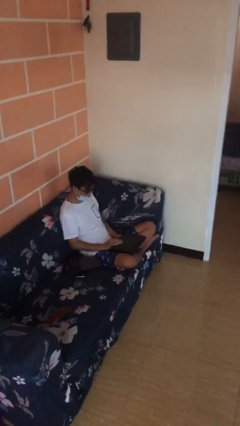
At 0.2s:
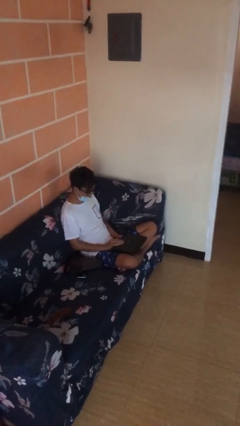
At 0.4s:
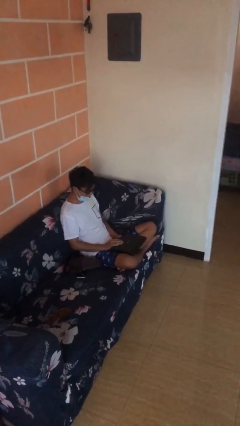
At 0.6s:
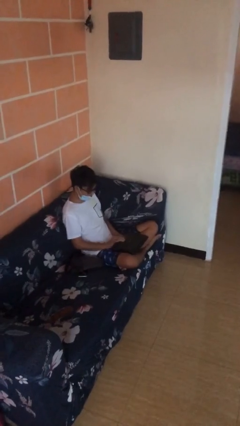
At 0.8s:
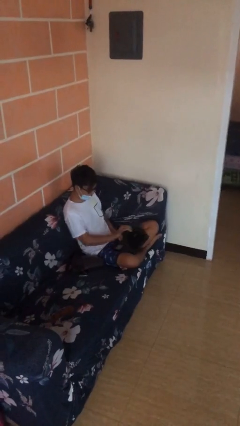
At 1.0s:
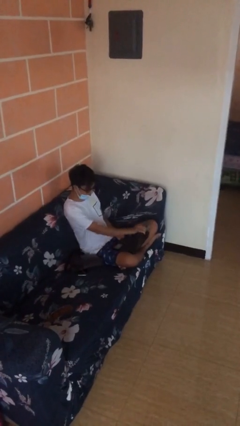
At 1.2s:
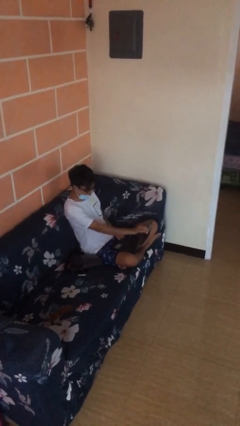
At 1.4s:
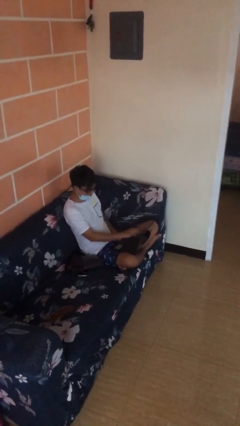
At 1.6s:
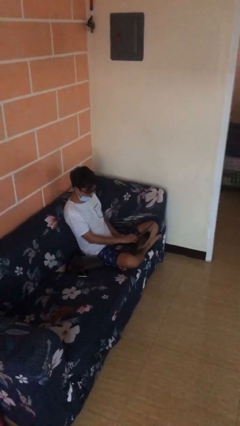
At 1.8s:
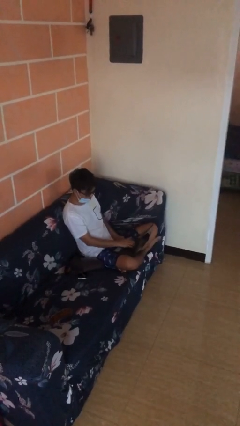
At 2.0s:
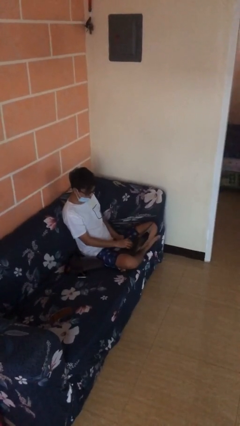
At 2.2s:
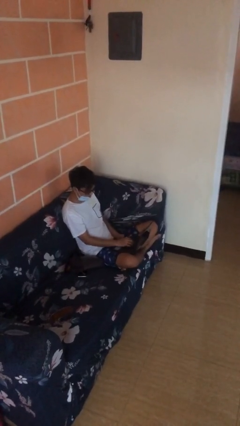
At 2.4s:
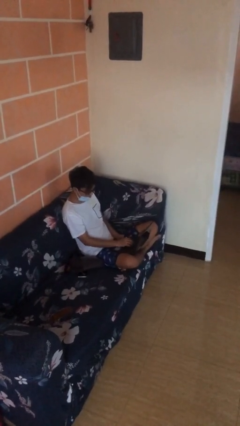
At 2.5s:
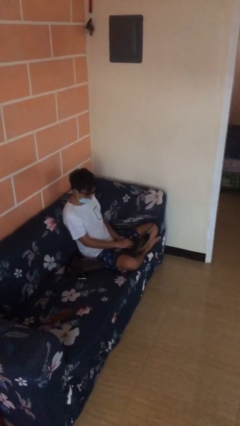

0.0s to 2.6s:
person interacts with laptop

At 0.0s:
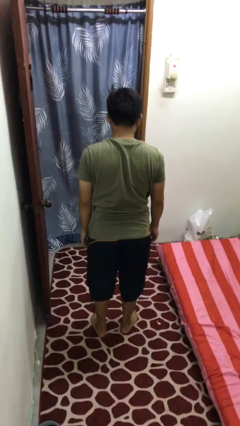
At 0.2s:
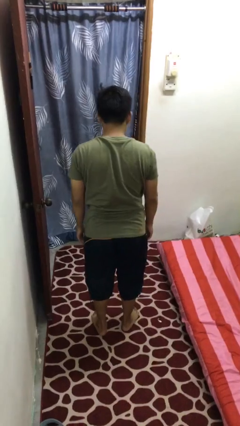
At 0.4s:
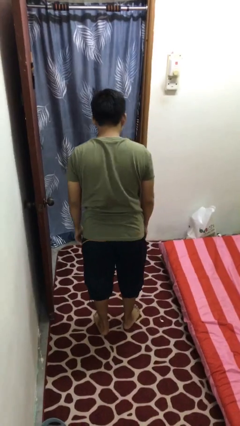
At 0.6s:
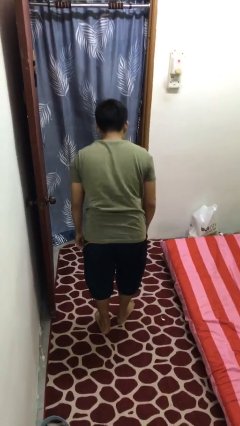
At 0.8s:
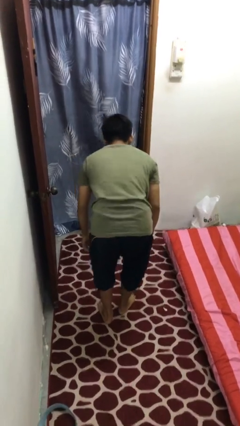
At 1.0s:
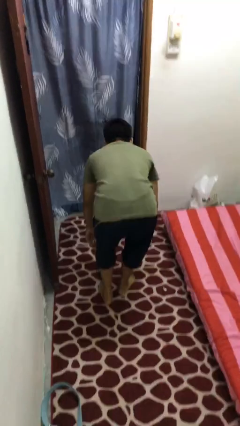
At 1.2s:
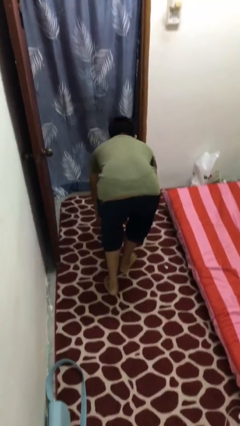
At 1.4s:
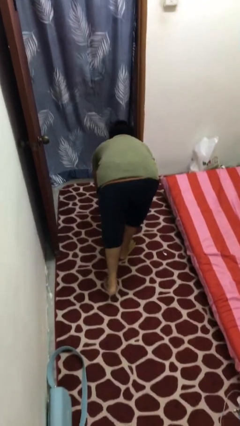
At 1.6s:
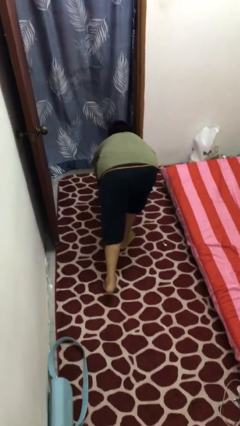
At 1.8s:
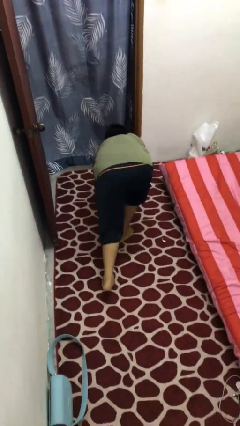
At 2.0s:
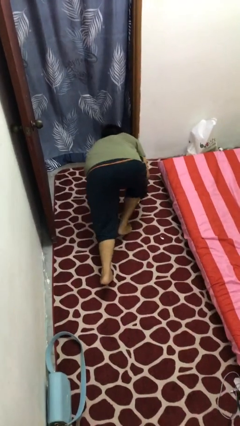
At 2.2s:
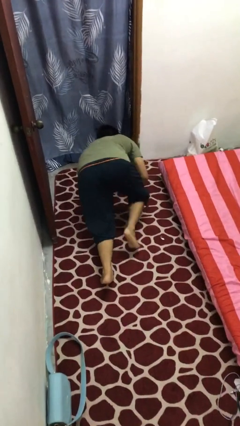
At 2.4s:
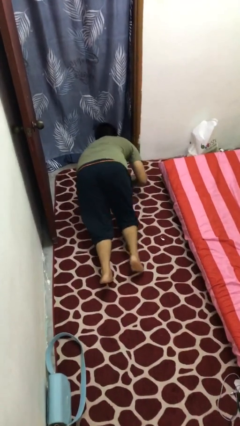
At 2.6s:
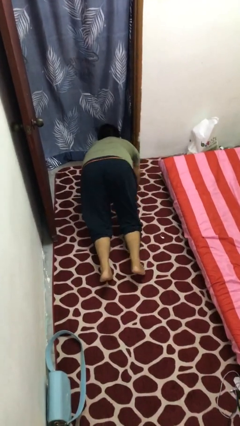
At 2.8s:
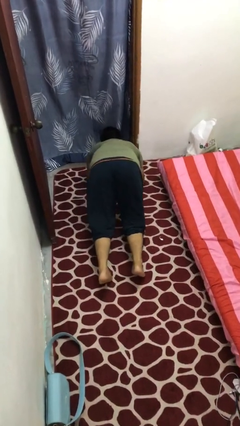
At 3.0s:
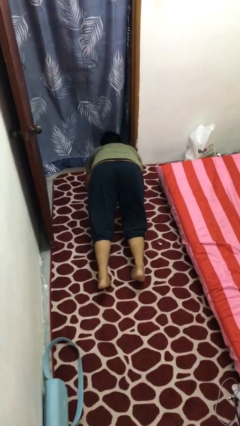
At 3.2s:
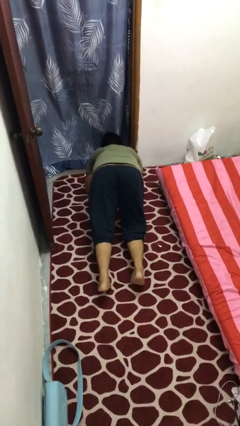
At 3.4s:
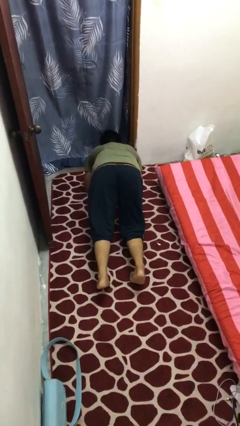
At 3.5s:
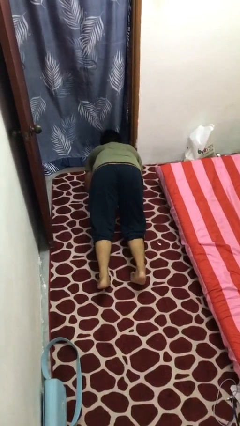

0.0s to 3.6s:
person exercises with plank

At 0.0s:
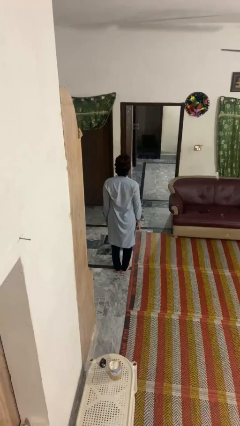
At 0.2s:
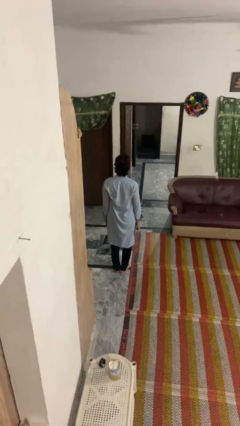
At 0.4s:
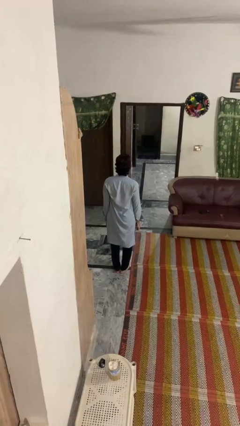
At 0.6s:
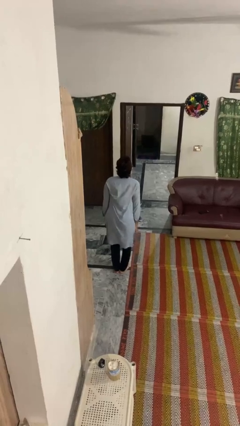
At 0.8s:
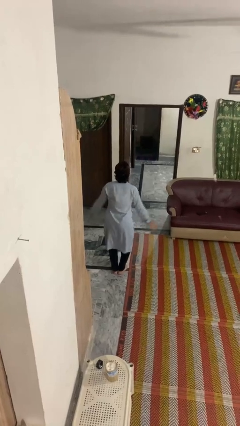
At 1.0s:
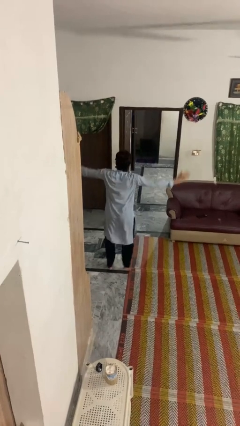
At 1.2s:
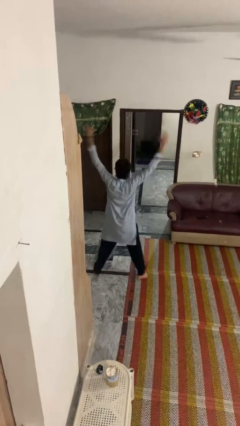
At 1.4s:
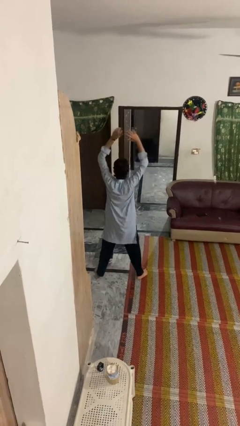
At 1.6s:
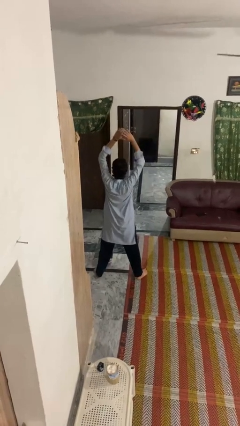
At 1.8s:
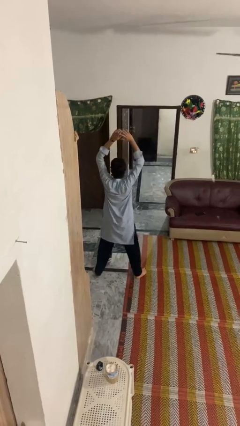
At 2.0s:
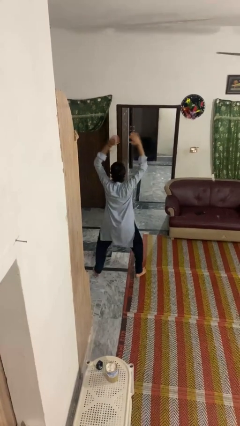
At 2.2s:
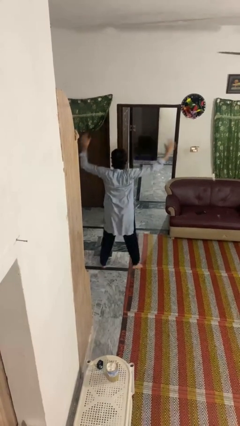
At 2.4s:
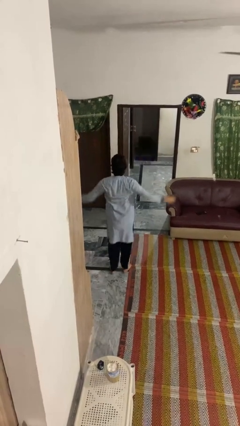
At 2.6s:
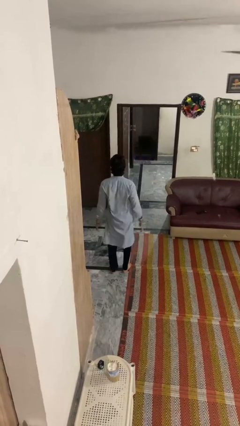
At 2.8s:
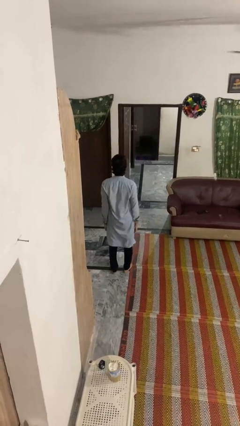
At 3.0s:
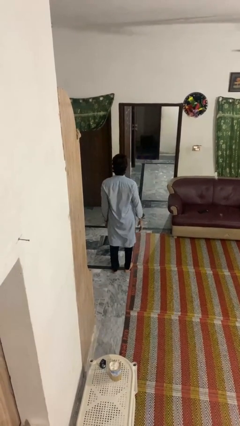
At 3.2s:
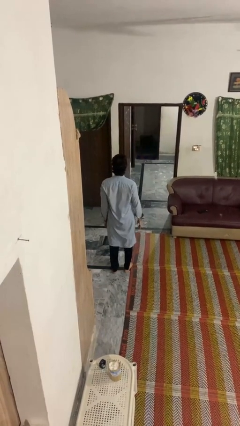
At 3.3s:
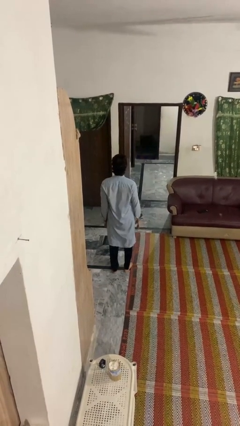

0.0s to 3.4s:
person exercises with jumping jacks

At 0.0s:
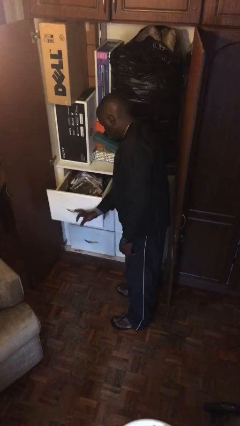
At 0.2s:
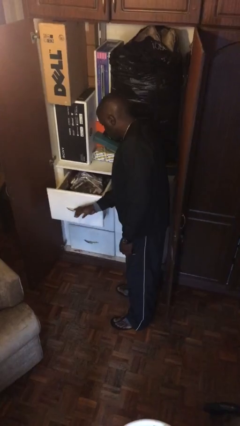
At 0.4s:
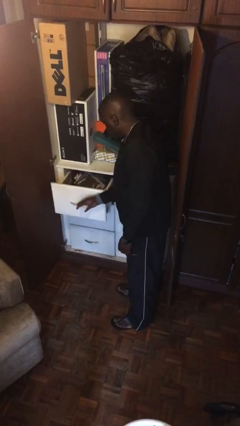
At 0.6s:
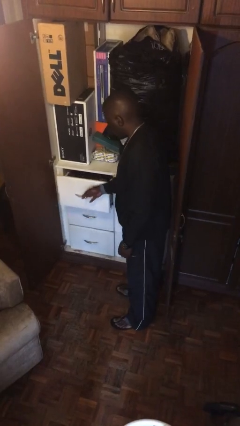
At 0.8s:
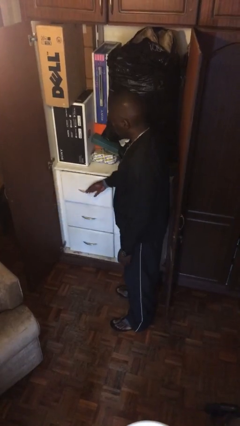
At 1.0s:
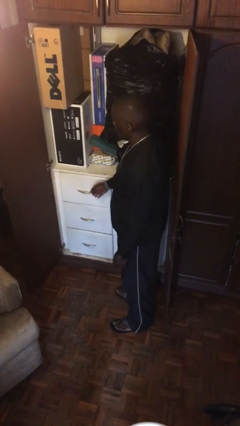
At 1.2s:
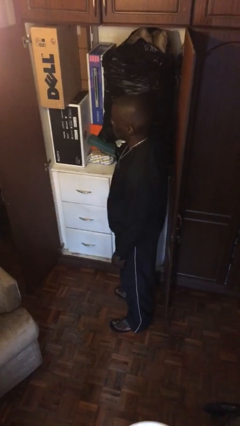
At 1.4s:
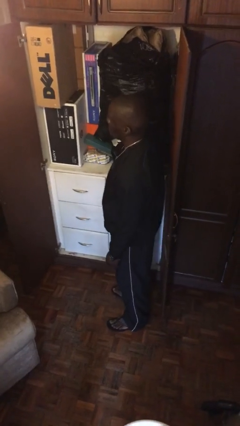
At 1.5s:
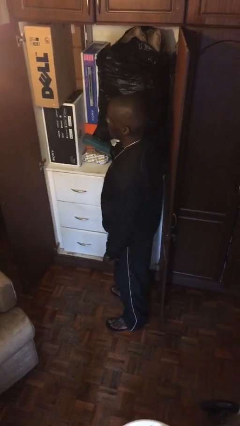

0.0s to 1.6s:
person closes dresser drawer

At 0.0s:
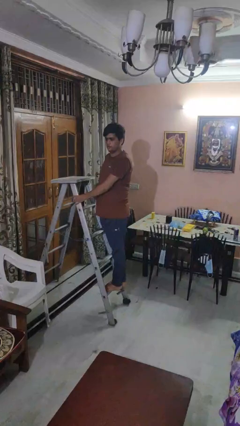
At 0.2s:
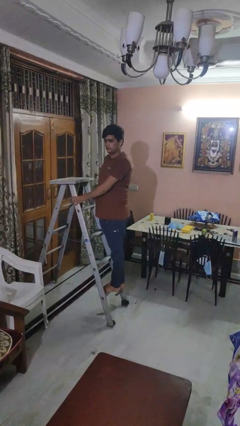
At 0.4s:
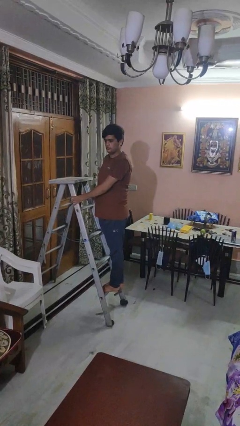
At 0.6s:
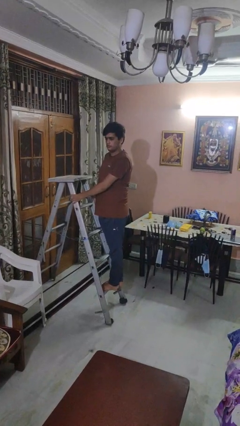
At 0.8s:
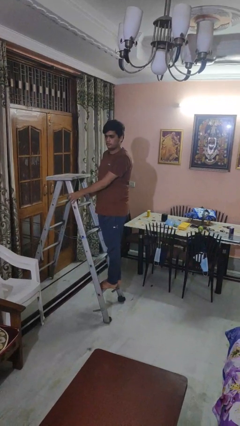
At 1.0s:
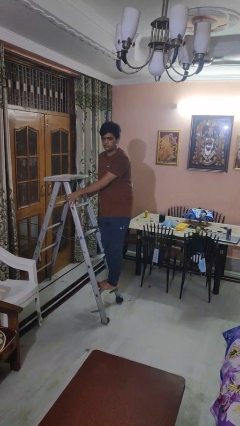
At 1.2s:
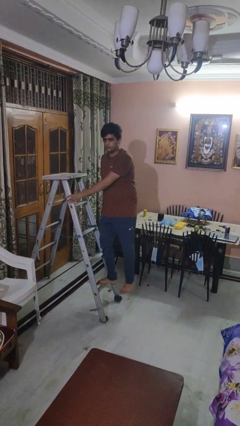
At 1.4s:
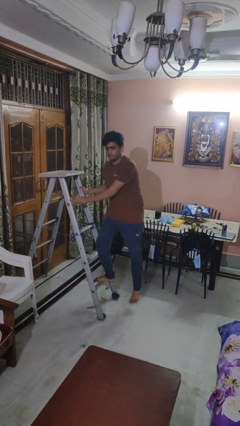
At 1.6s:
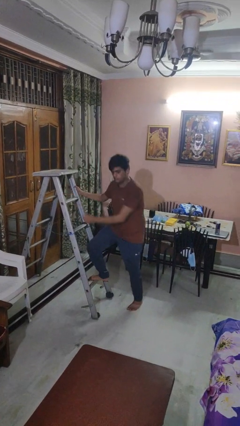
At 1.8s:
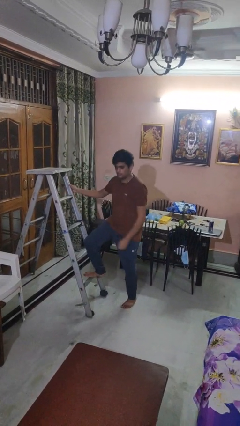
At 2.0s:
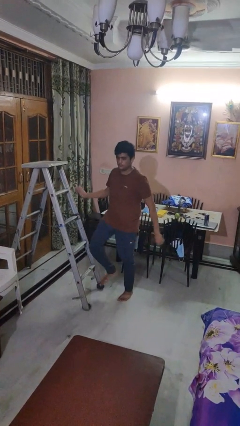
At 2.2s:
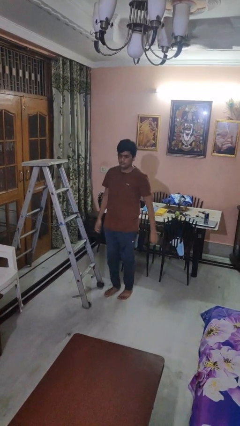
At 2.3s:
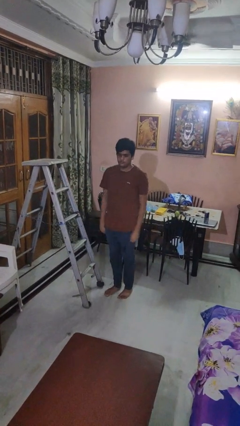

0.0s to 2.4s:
person climbs down ladder

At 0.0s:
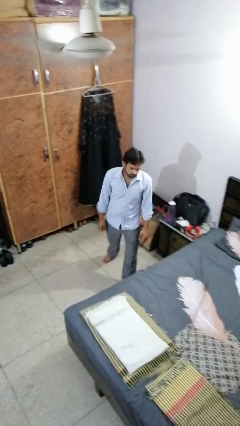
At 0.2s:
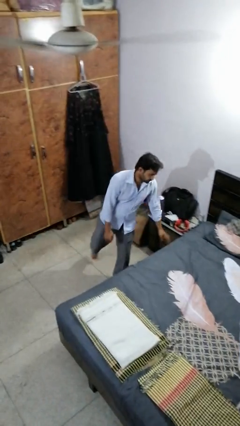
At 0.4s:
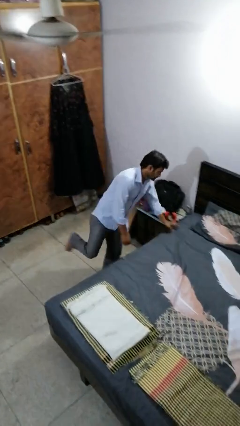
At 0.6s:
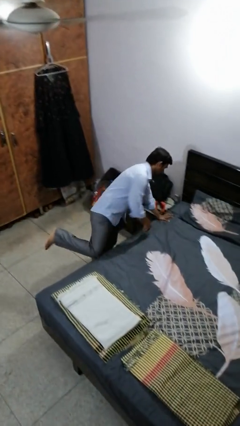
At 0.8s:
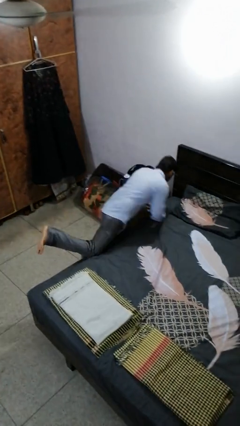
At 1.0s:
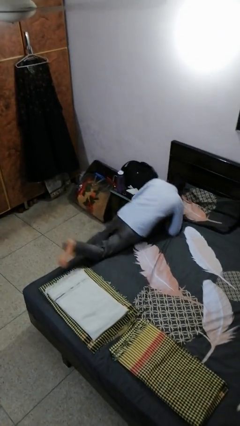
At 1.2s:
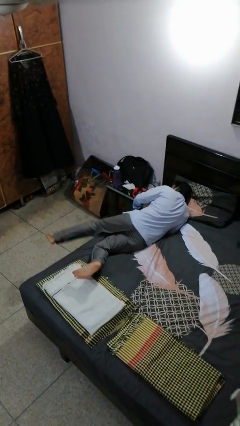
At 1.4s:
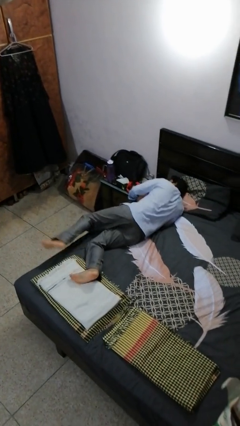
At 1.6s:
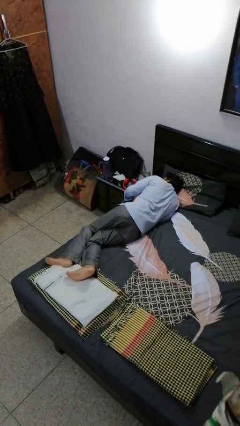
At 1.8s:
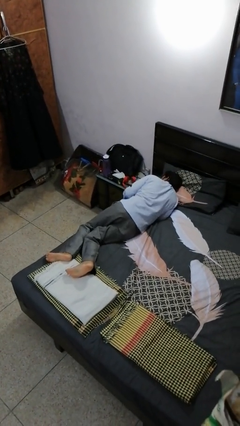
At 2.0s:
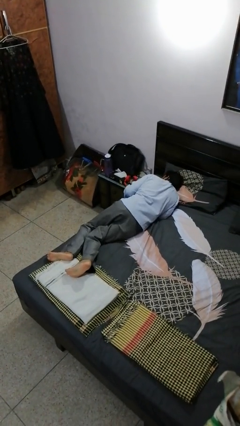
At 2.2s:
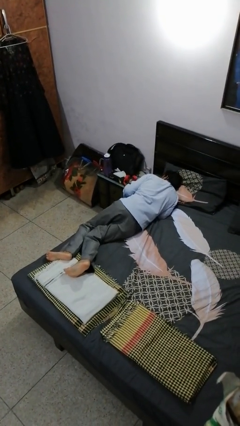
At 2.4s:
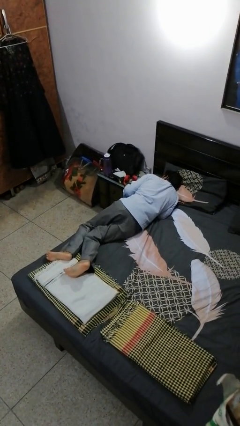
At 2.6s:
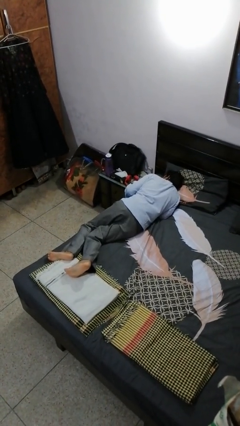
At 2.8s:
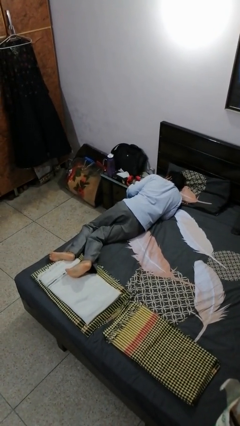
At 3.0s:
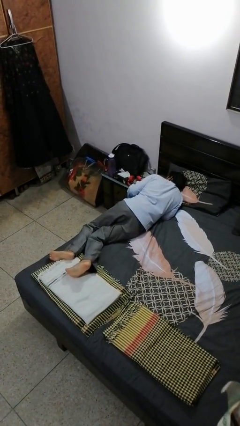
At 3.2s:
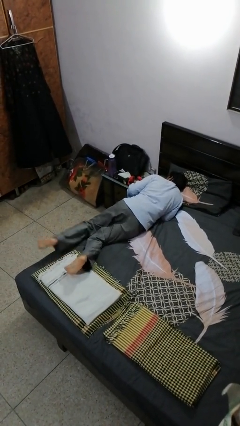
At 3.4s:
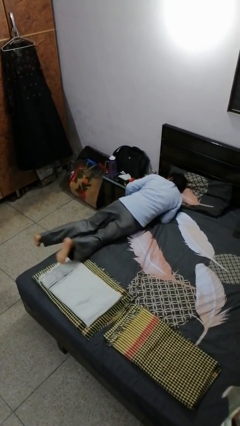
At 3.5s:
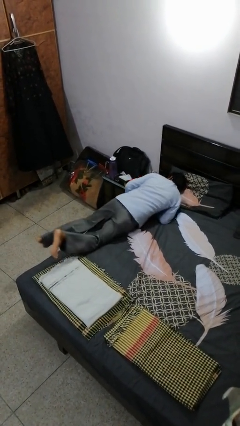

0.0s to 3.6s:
person lies down on bed

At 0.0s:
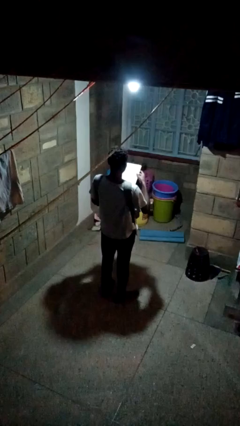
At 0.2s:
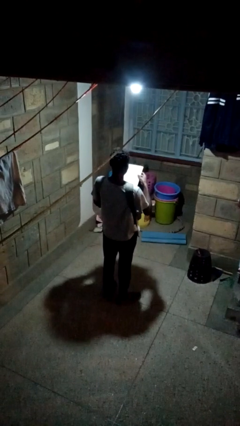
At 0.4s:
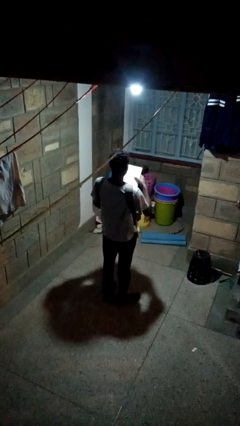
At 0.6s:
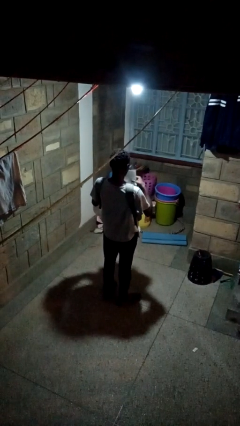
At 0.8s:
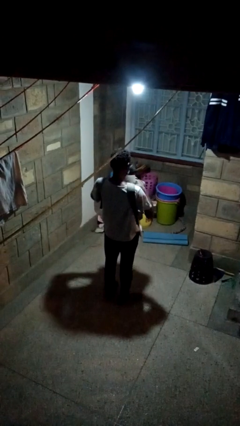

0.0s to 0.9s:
person puts object into backpack
